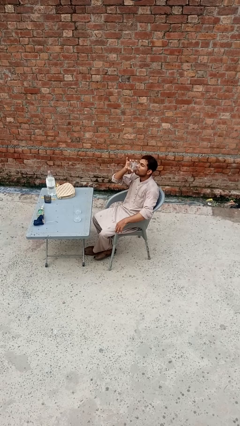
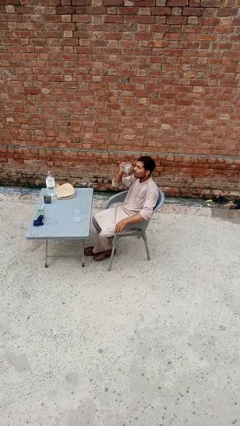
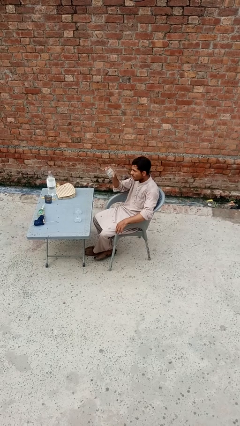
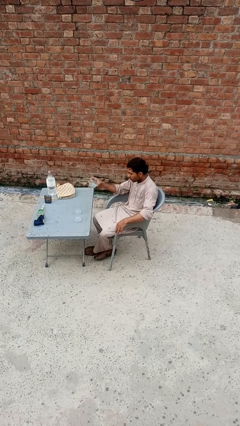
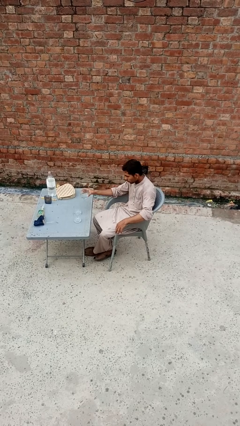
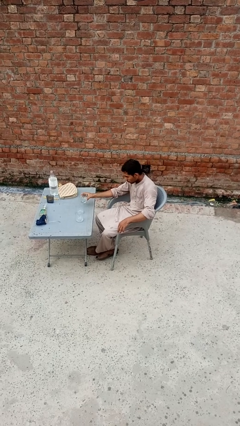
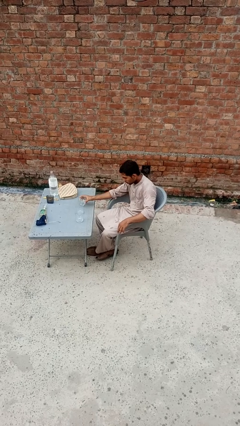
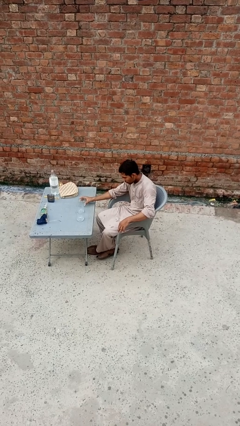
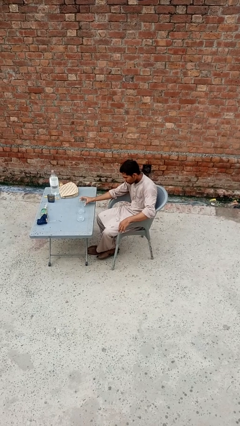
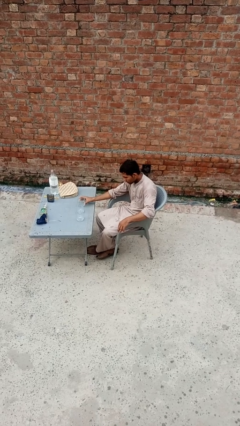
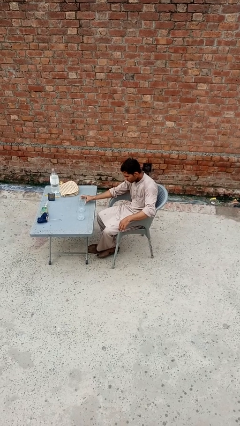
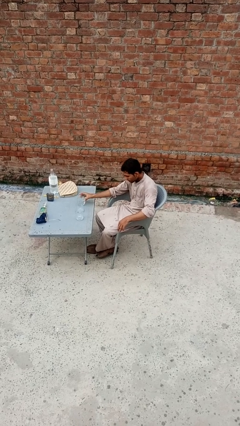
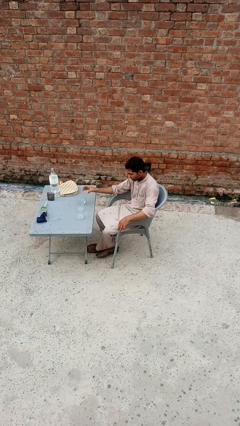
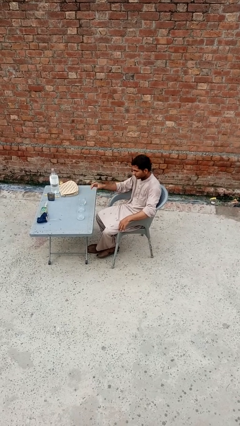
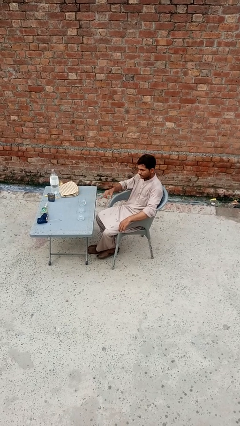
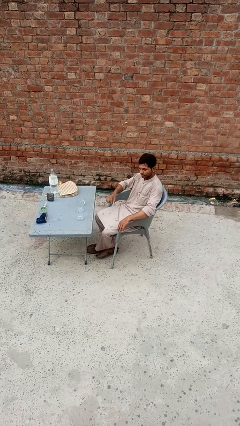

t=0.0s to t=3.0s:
person puts down object on table

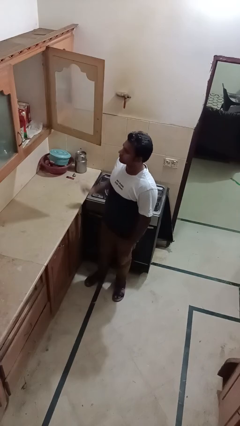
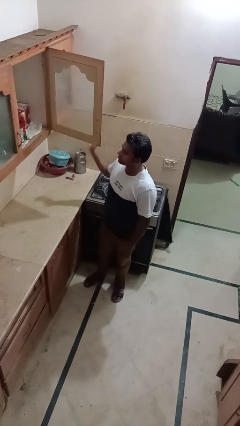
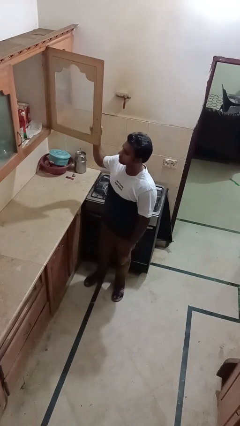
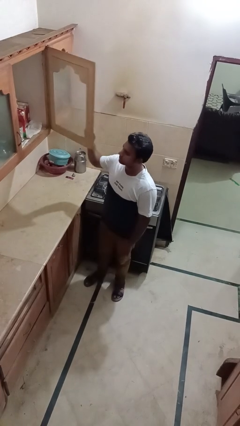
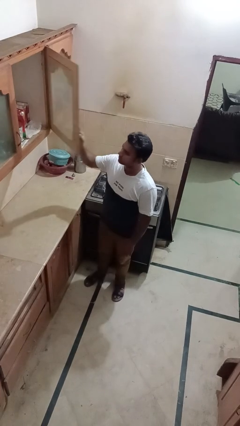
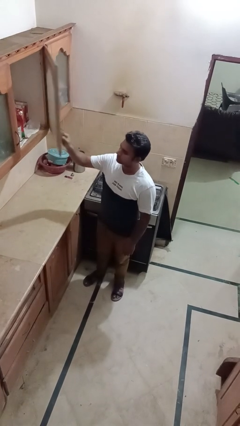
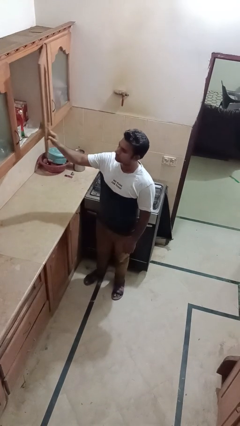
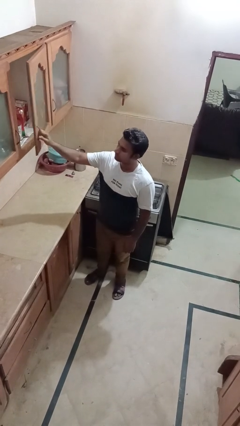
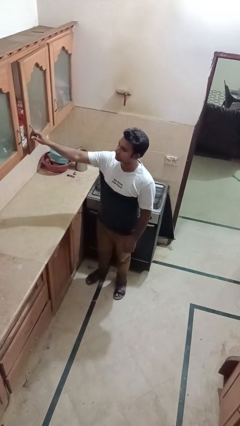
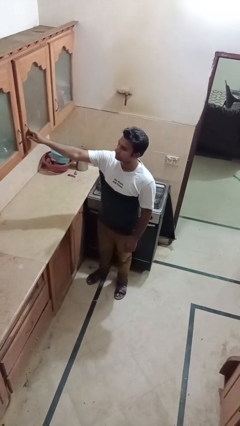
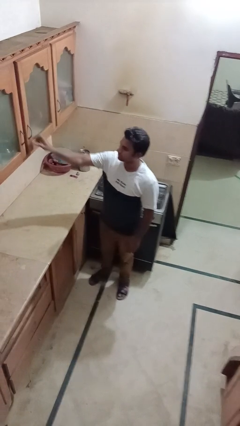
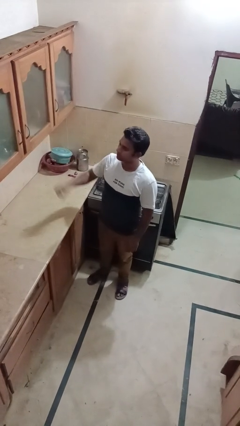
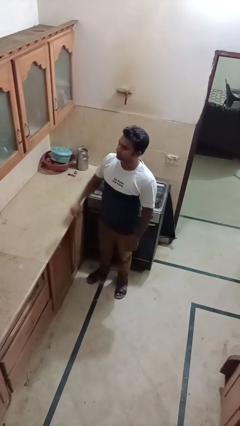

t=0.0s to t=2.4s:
person closes cabinet

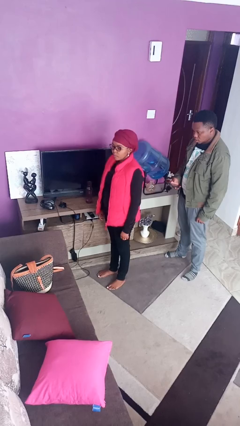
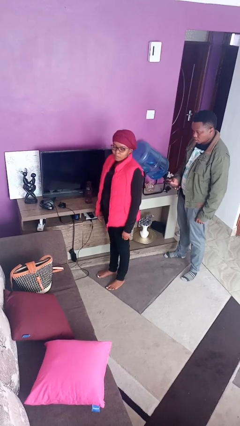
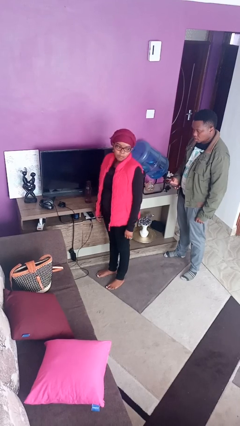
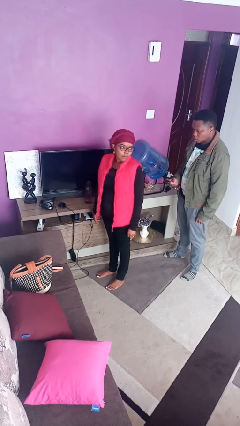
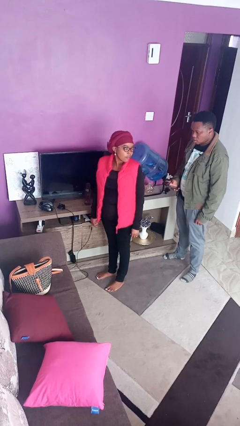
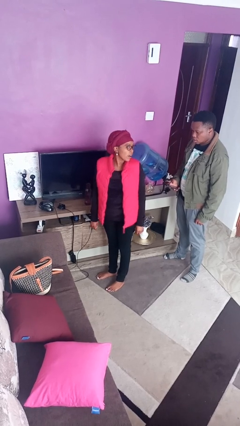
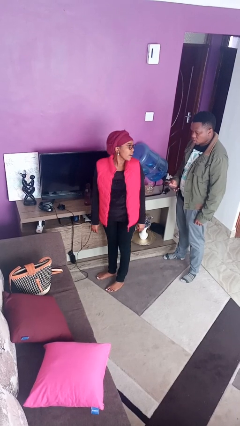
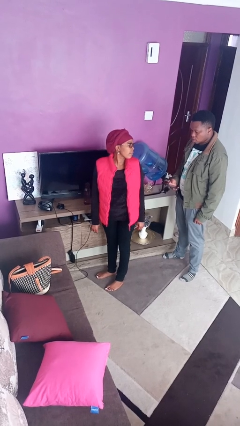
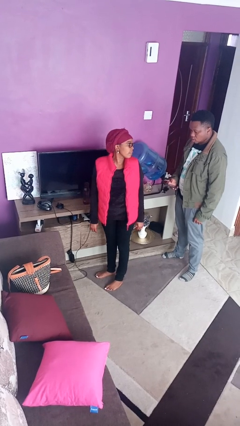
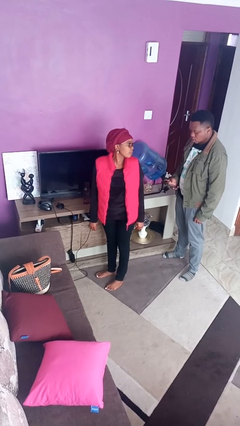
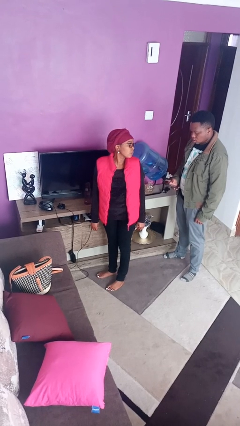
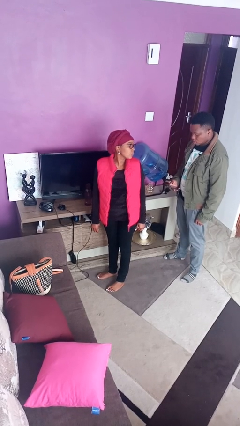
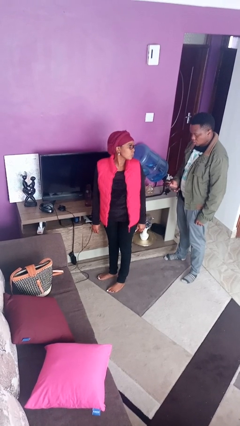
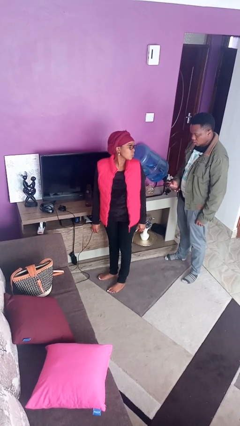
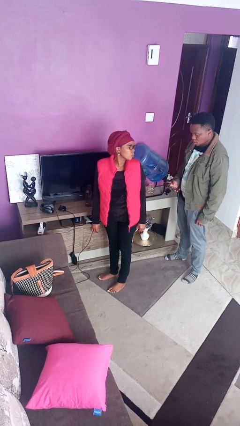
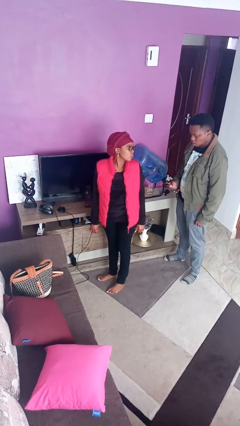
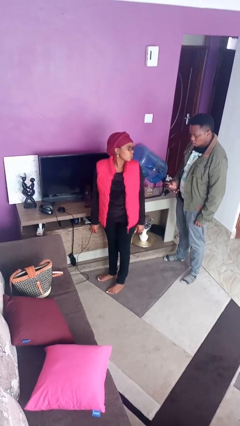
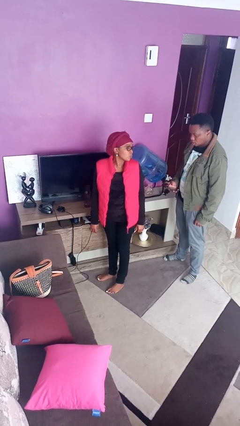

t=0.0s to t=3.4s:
person looks over shoulder

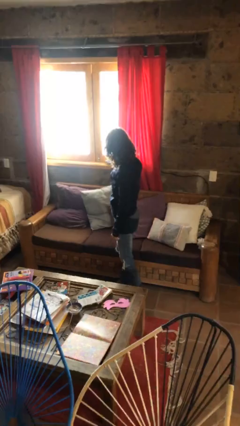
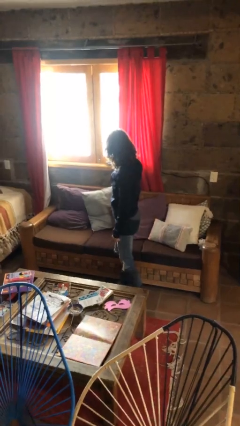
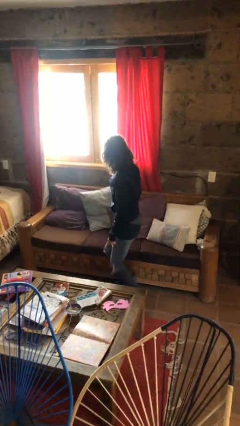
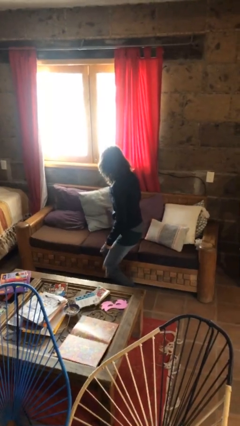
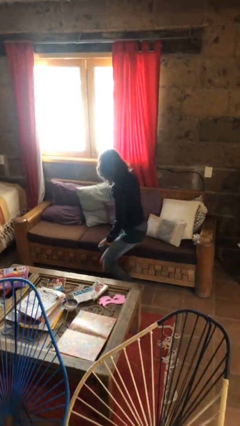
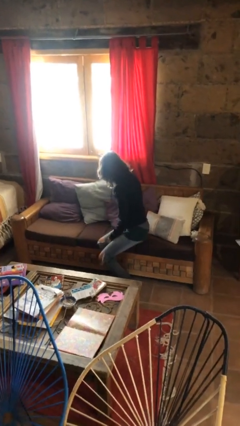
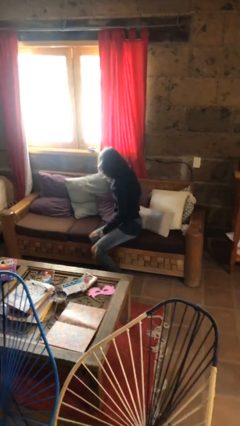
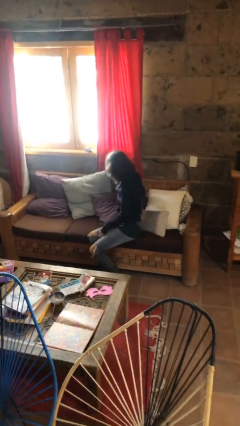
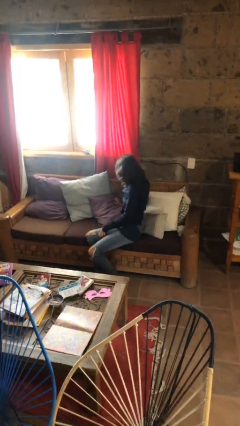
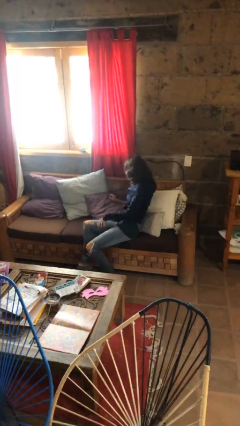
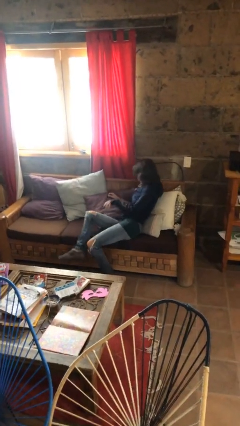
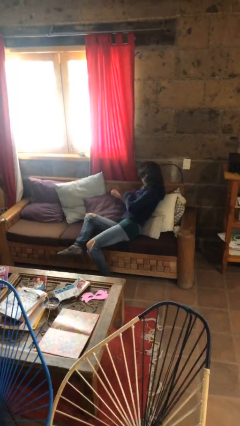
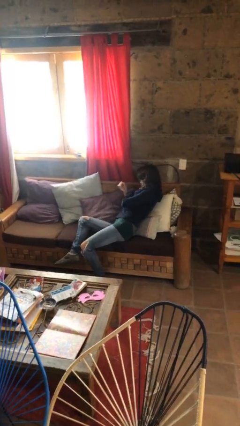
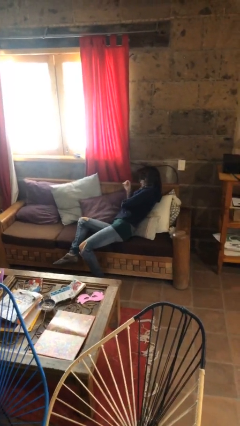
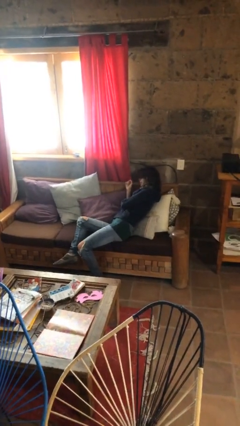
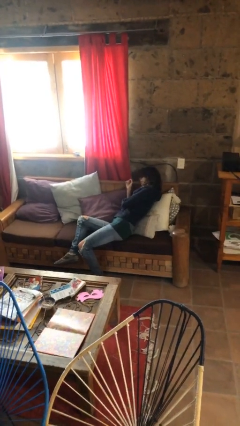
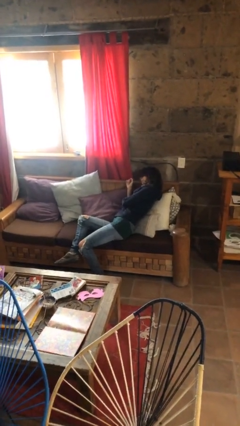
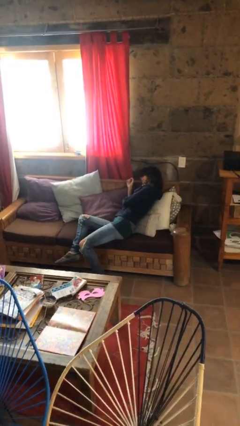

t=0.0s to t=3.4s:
person lies down on couch

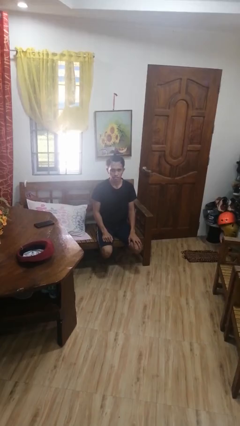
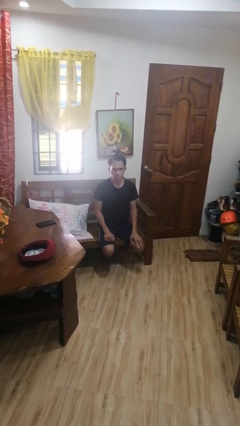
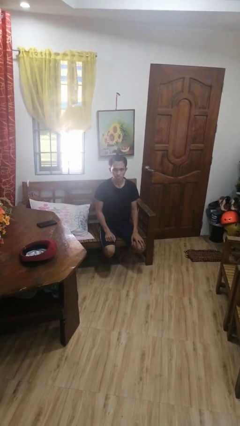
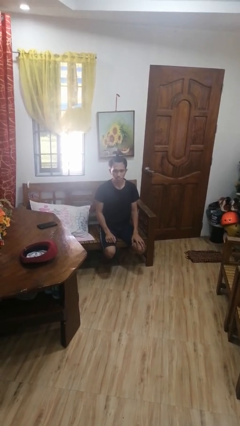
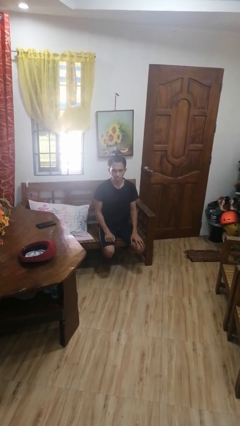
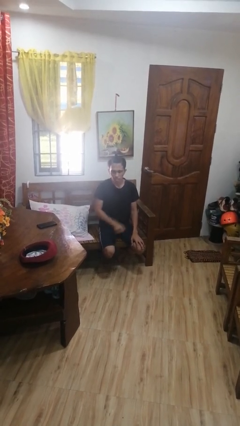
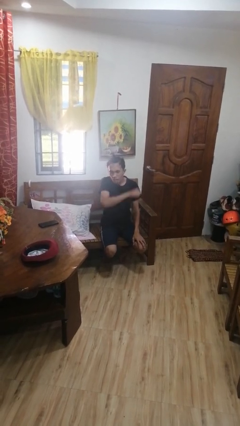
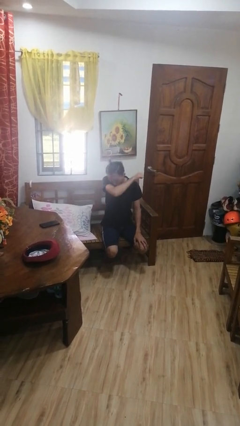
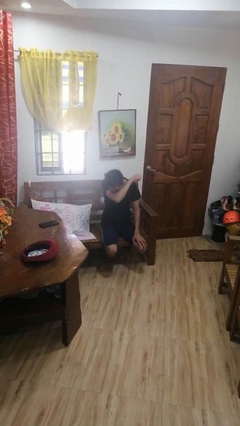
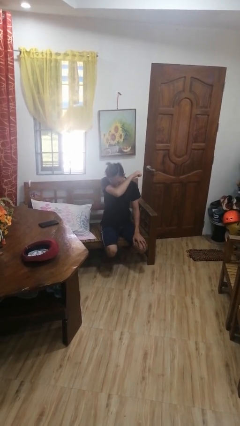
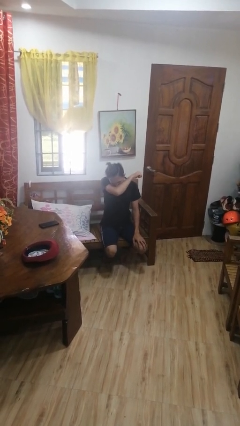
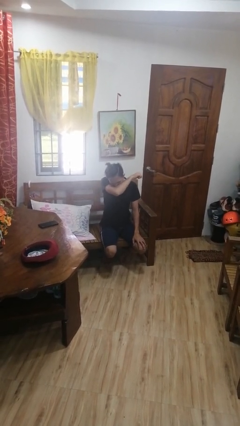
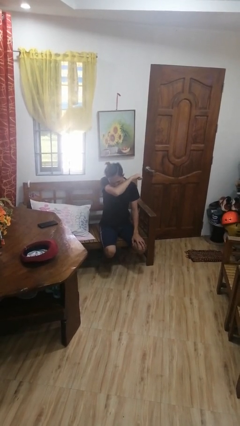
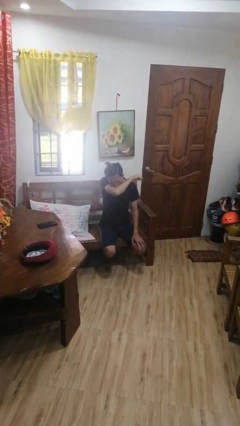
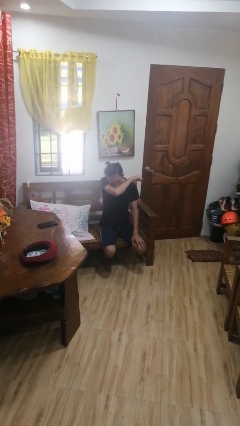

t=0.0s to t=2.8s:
person sneezes into arm

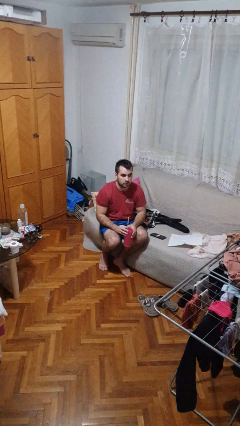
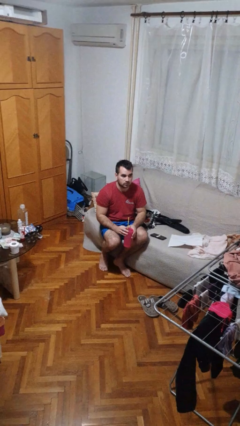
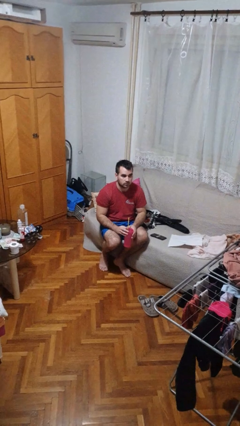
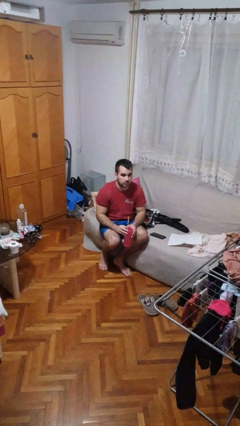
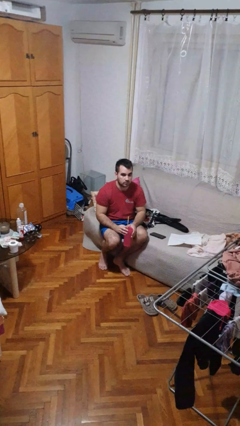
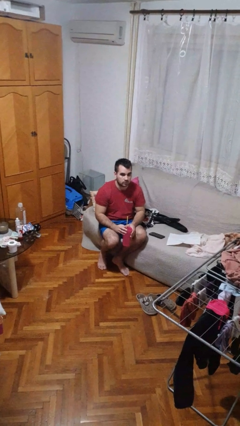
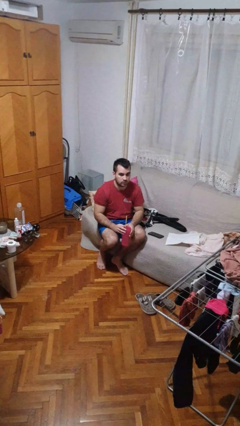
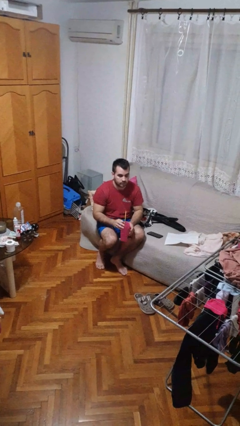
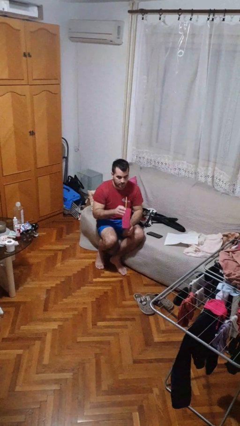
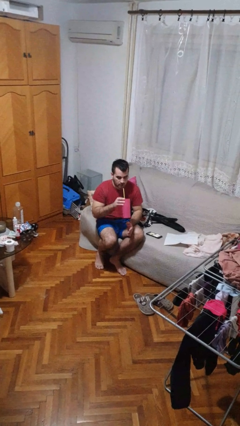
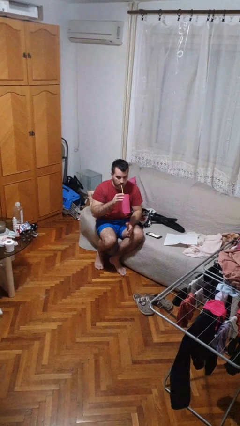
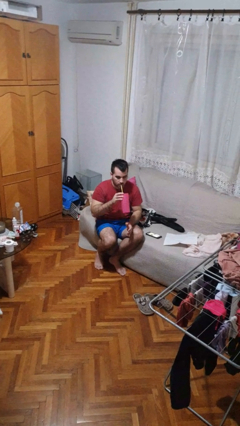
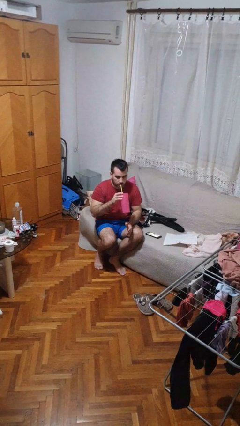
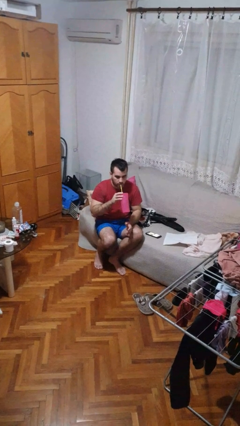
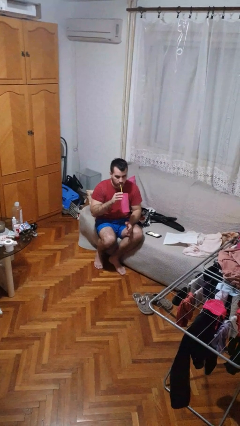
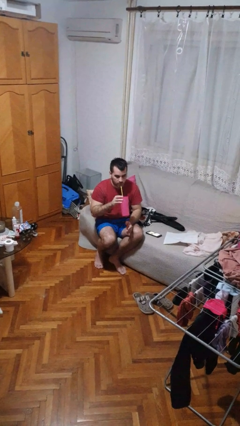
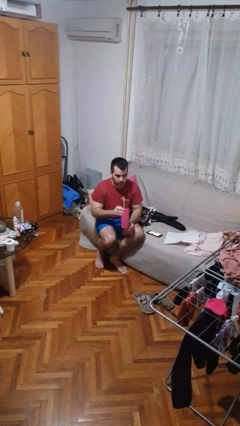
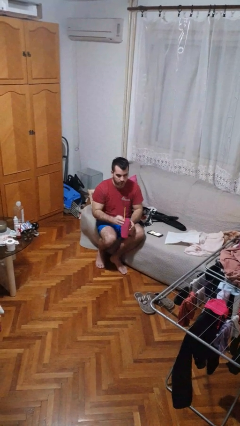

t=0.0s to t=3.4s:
person drinks from straw
